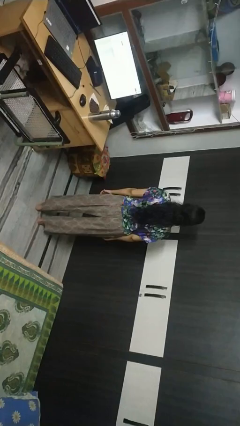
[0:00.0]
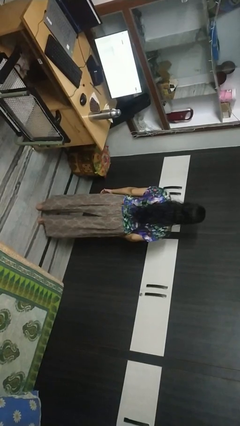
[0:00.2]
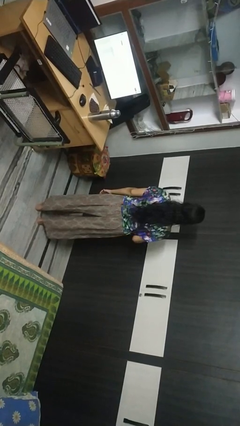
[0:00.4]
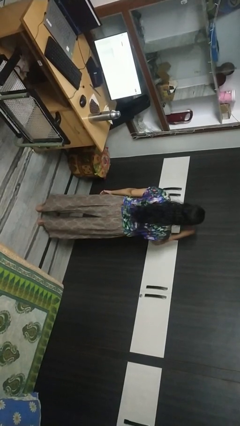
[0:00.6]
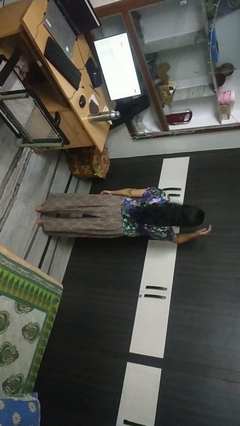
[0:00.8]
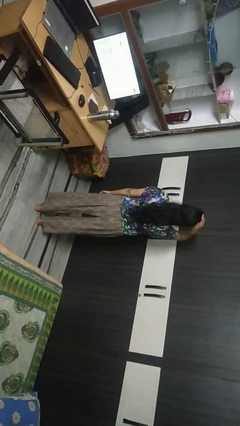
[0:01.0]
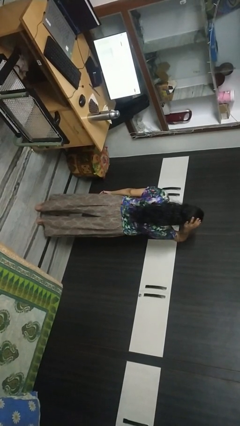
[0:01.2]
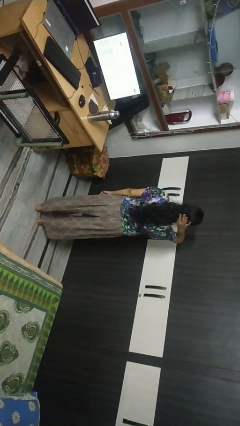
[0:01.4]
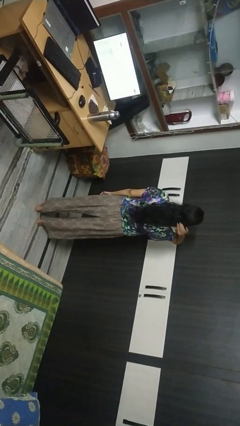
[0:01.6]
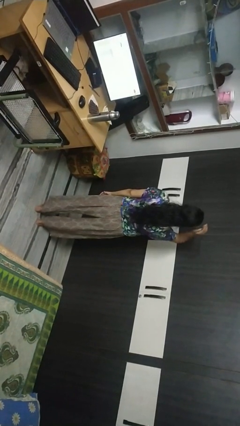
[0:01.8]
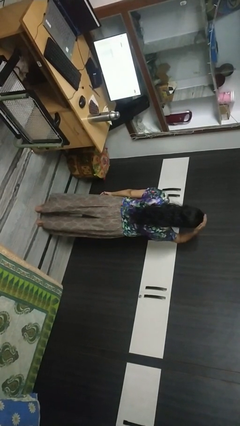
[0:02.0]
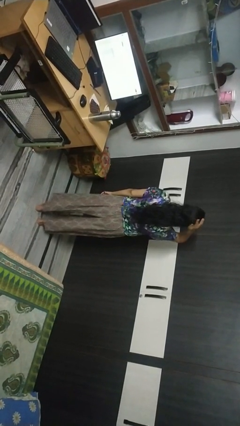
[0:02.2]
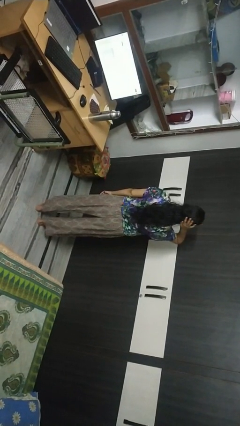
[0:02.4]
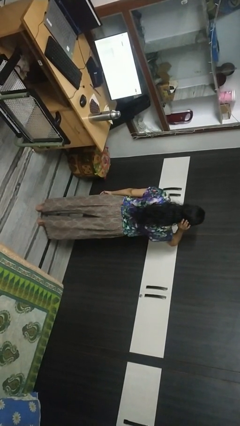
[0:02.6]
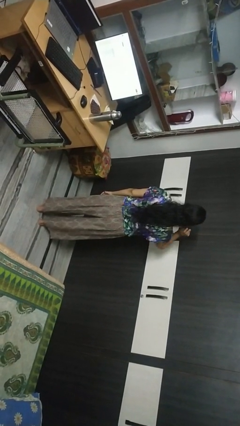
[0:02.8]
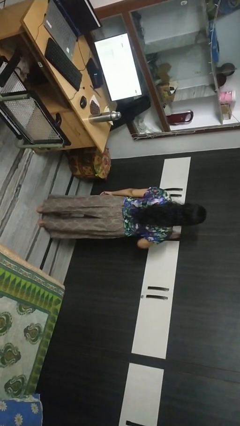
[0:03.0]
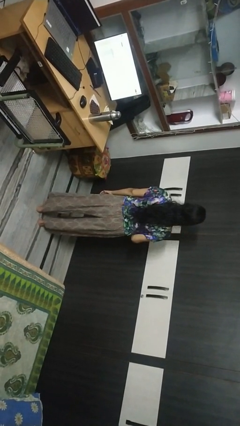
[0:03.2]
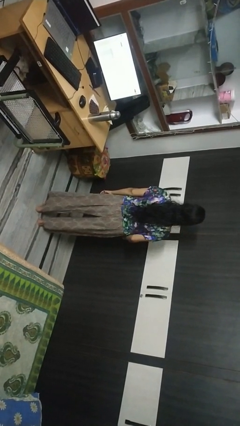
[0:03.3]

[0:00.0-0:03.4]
person pats head

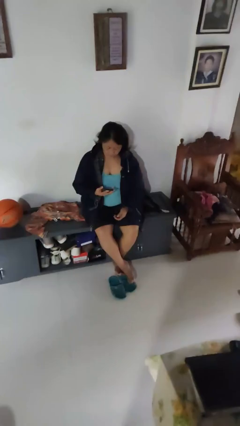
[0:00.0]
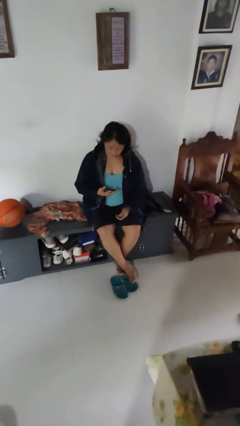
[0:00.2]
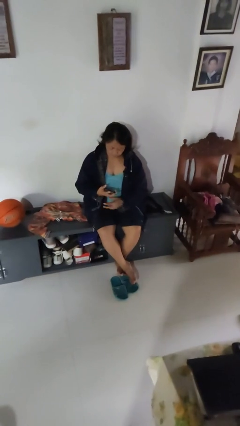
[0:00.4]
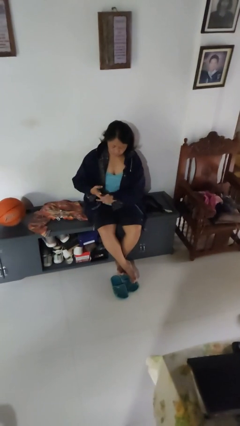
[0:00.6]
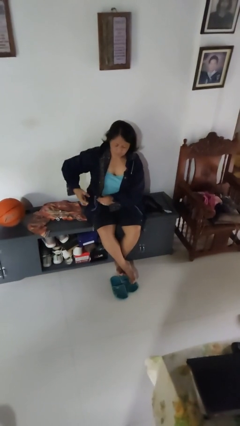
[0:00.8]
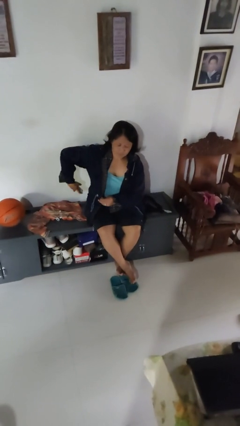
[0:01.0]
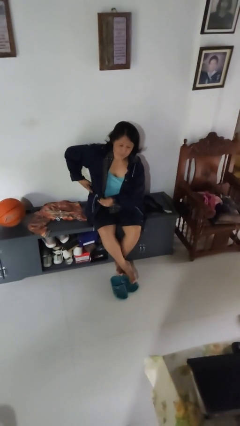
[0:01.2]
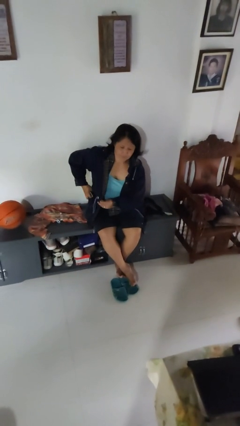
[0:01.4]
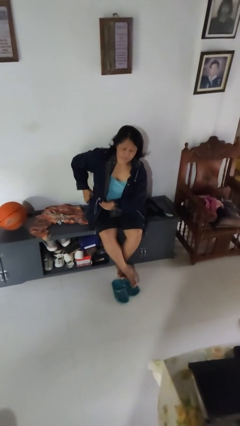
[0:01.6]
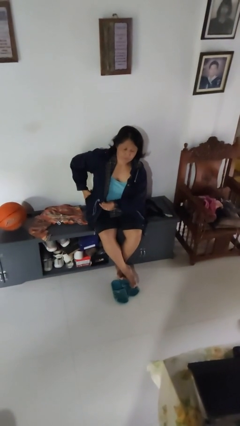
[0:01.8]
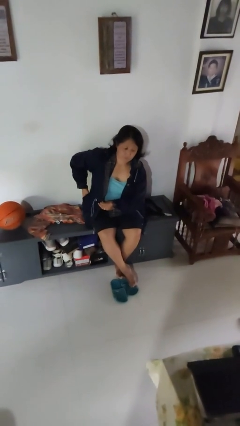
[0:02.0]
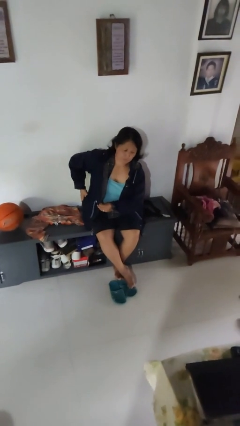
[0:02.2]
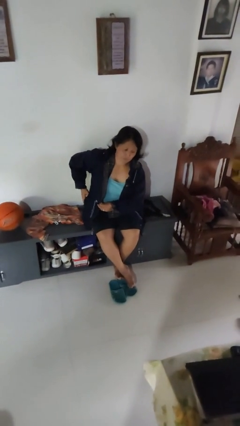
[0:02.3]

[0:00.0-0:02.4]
person puts phone into pocket

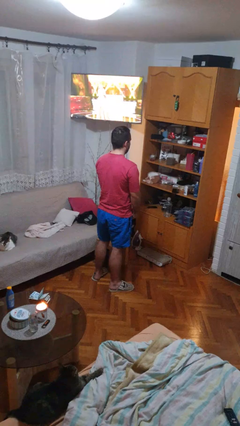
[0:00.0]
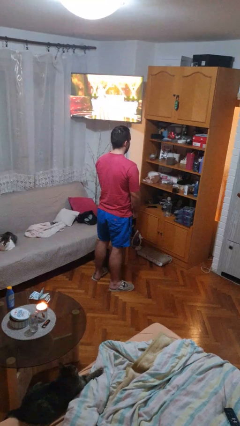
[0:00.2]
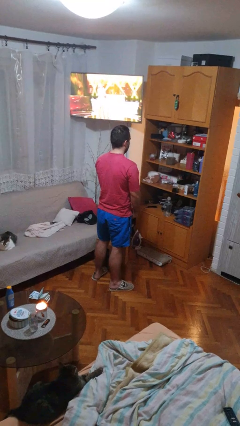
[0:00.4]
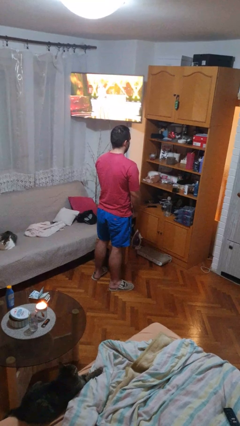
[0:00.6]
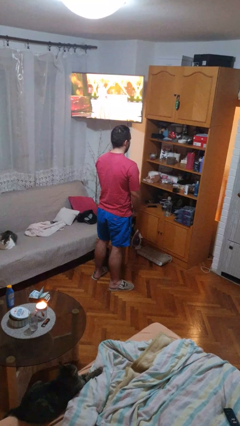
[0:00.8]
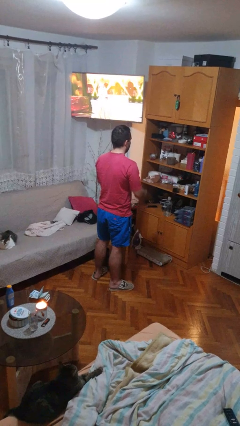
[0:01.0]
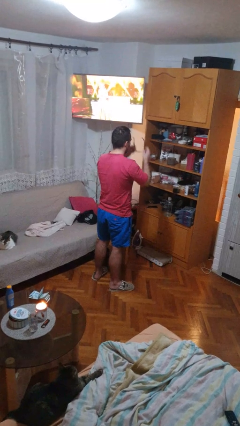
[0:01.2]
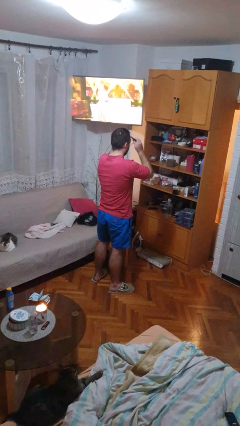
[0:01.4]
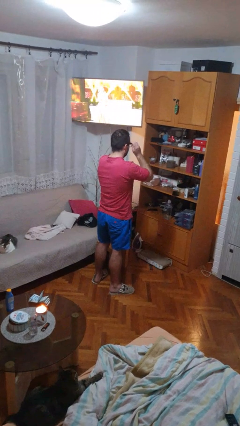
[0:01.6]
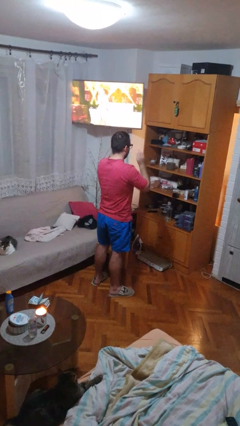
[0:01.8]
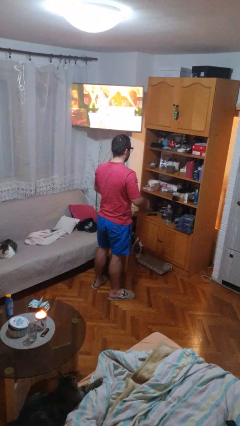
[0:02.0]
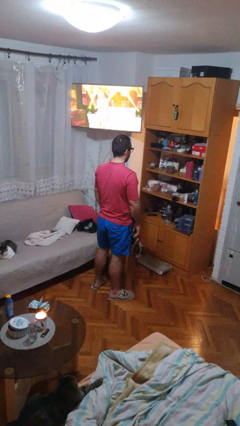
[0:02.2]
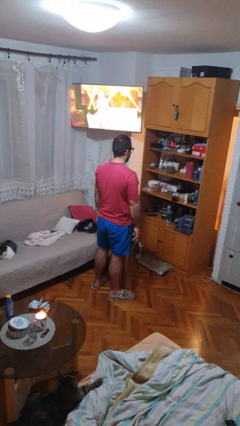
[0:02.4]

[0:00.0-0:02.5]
person puts on glasses

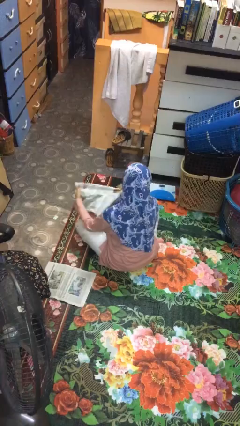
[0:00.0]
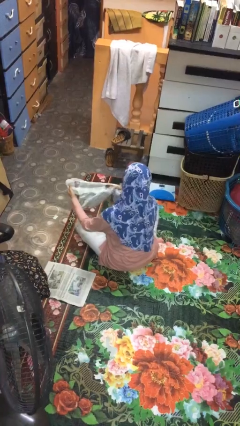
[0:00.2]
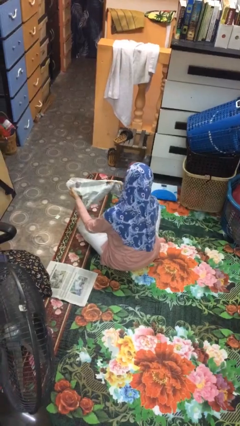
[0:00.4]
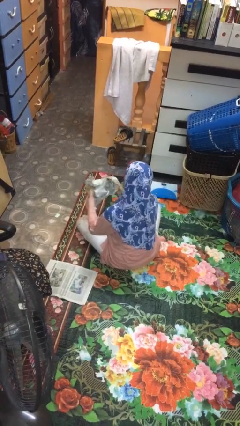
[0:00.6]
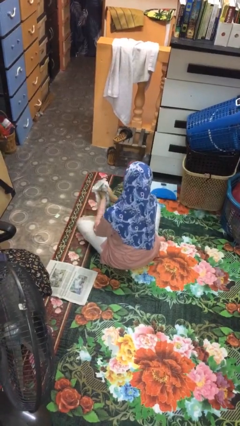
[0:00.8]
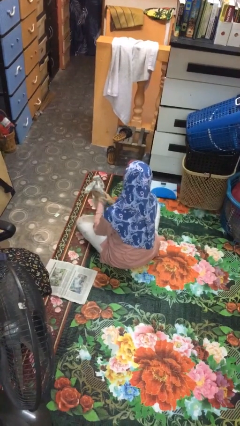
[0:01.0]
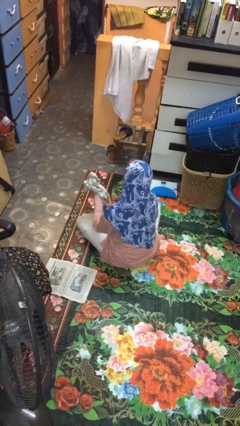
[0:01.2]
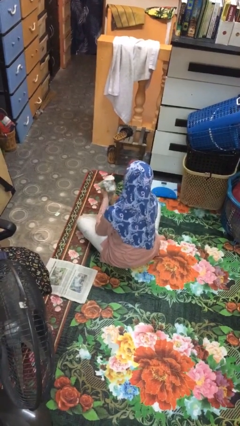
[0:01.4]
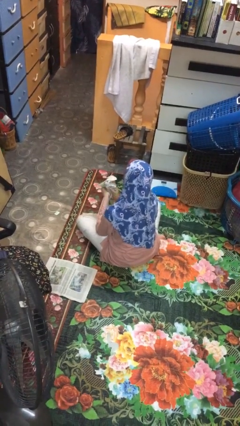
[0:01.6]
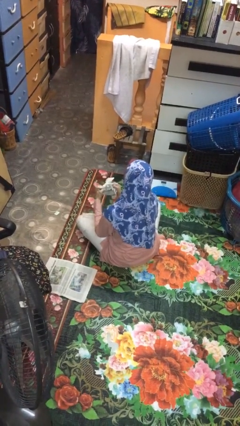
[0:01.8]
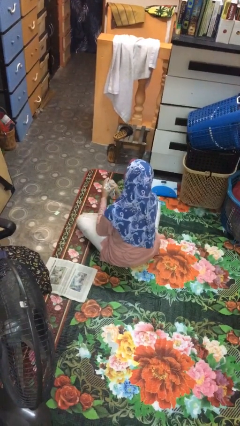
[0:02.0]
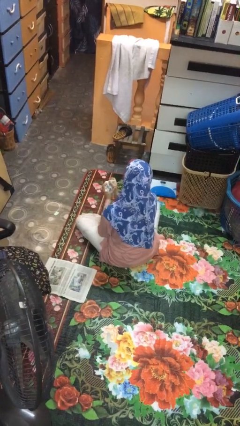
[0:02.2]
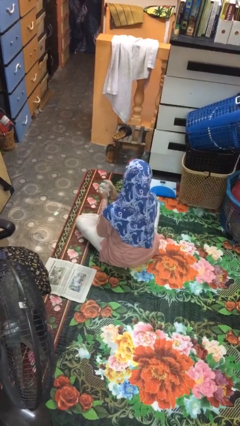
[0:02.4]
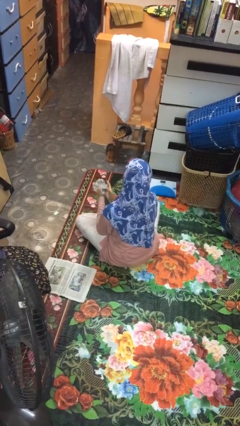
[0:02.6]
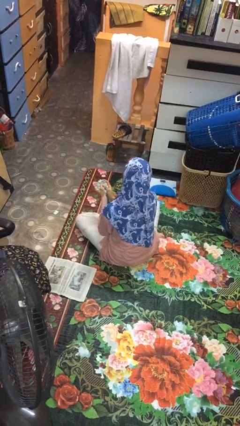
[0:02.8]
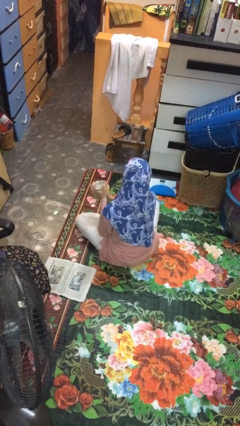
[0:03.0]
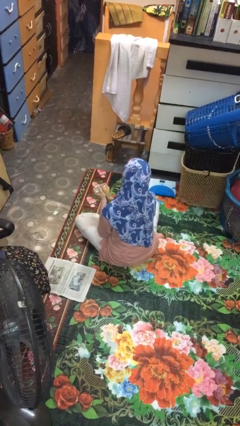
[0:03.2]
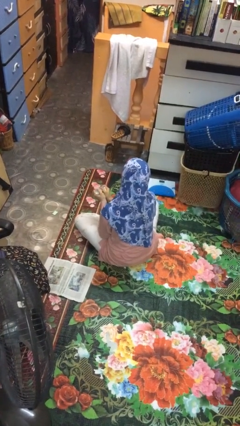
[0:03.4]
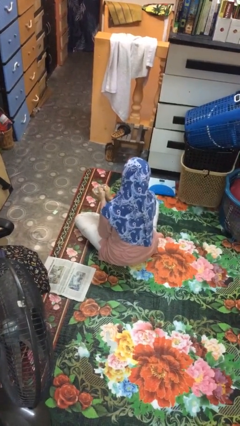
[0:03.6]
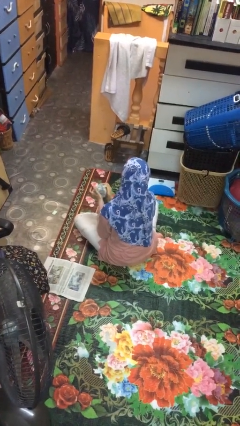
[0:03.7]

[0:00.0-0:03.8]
person crumples paper

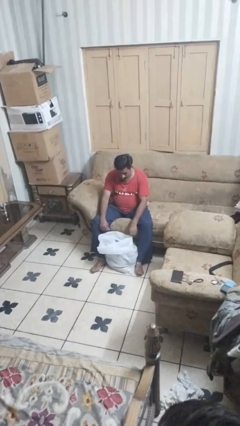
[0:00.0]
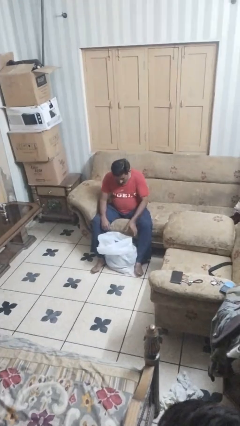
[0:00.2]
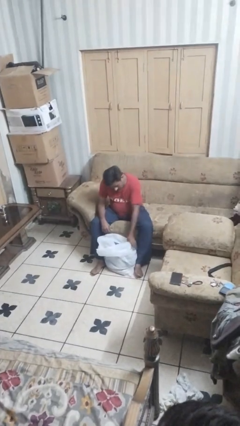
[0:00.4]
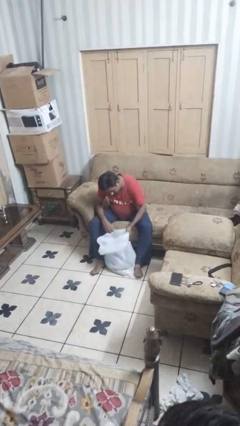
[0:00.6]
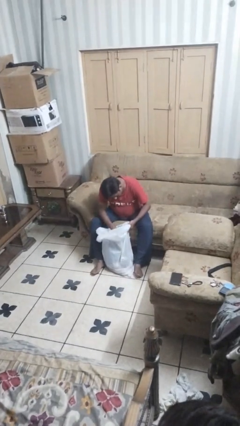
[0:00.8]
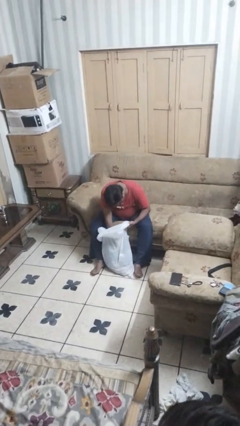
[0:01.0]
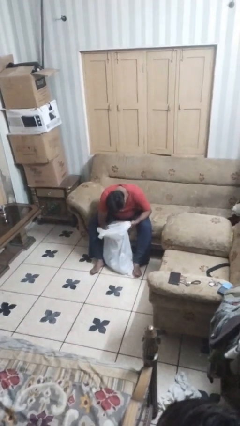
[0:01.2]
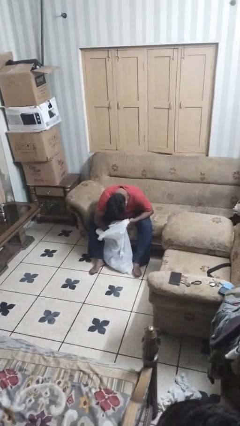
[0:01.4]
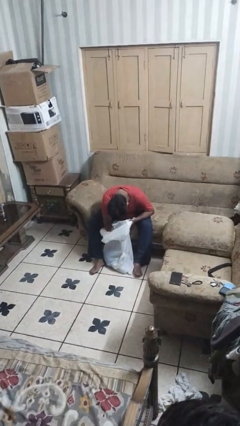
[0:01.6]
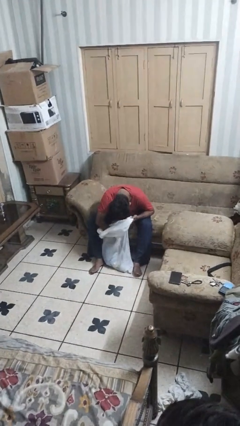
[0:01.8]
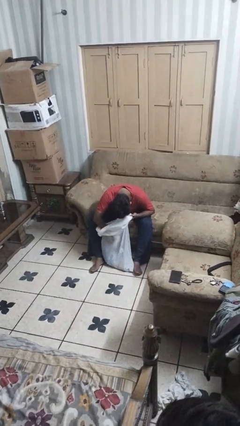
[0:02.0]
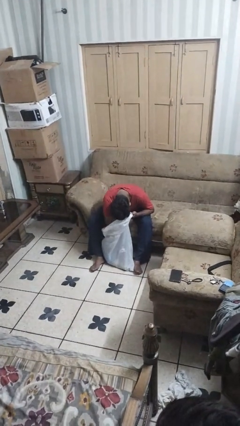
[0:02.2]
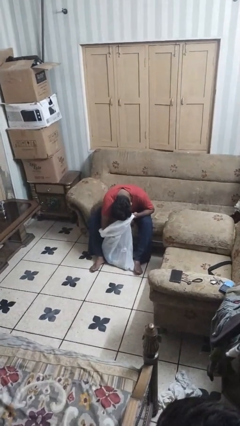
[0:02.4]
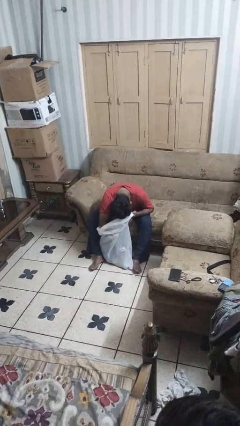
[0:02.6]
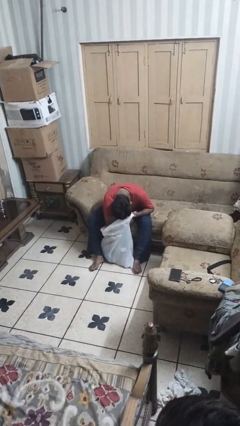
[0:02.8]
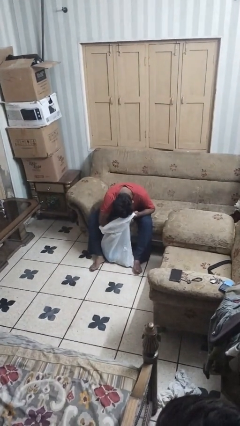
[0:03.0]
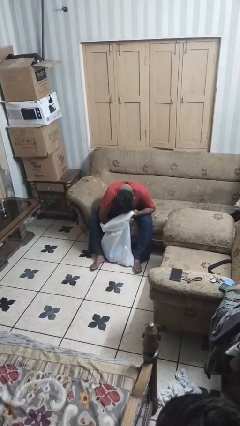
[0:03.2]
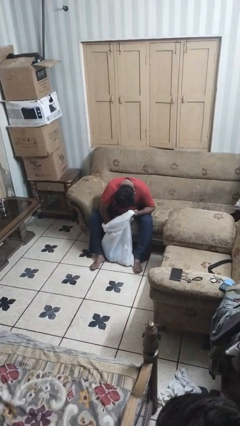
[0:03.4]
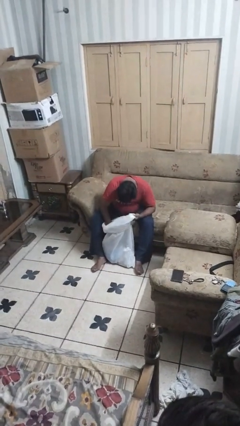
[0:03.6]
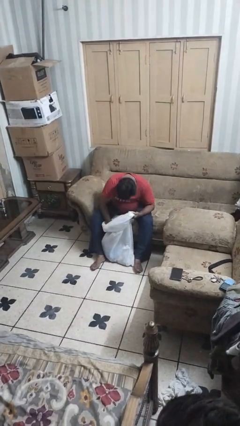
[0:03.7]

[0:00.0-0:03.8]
person searches in bag

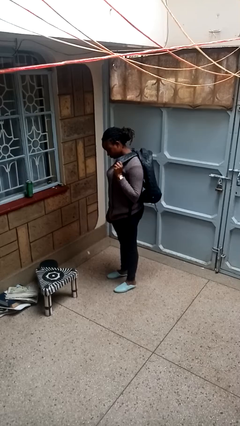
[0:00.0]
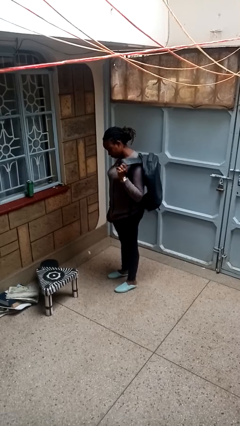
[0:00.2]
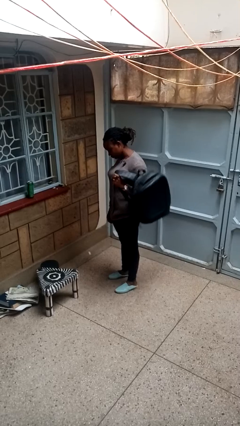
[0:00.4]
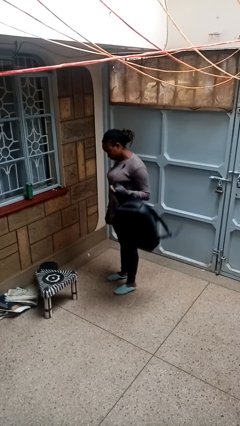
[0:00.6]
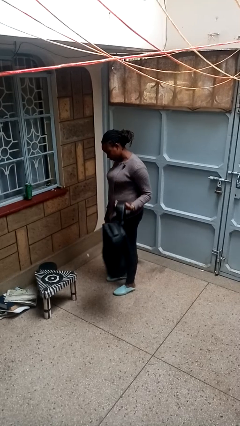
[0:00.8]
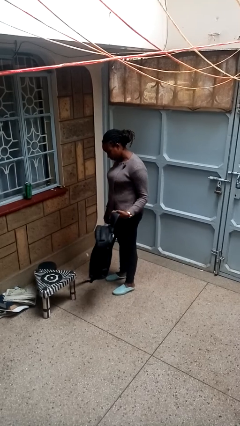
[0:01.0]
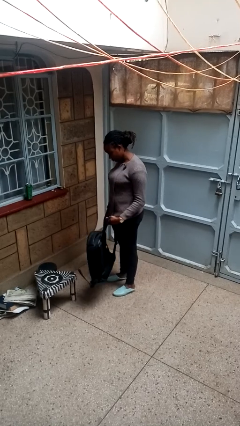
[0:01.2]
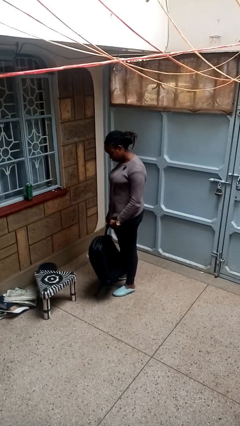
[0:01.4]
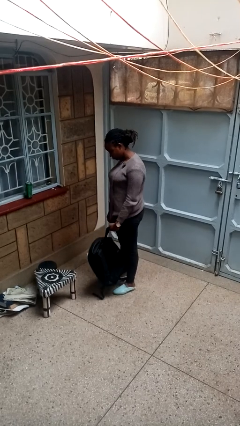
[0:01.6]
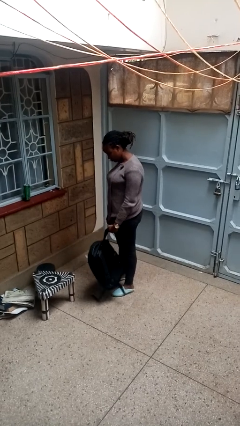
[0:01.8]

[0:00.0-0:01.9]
person takes off backpack
